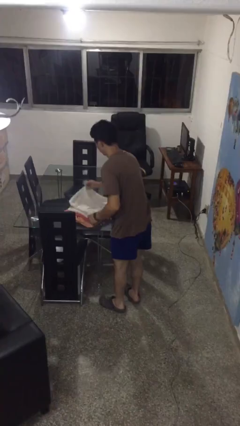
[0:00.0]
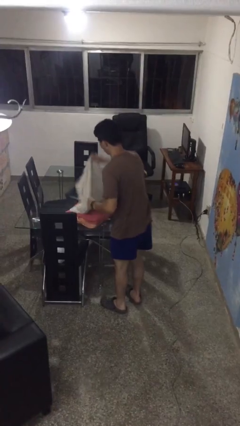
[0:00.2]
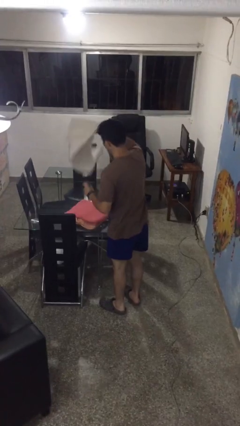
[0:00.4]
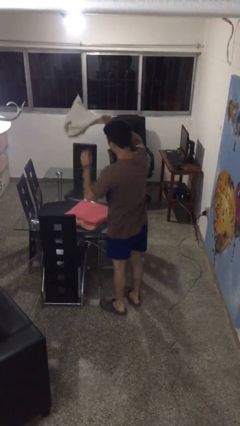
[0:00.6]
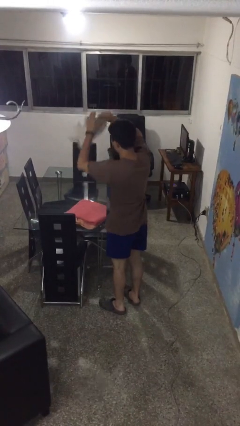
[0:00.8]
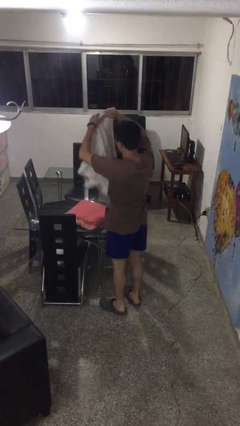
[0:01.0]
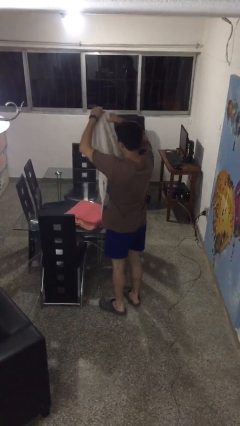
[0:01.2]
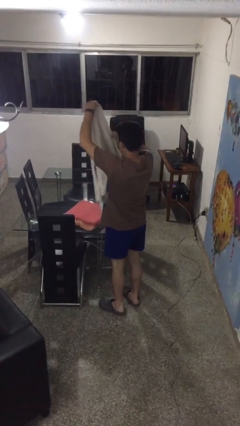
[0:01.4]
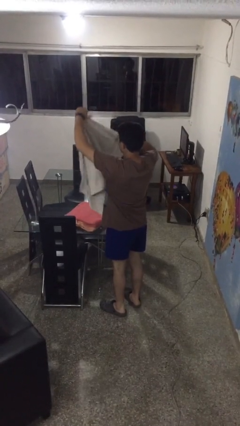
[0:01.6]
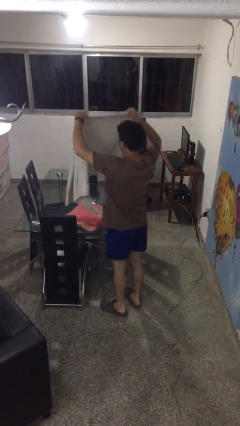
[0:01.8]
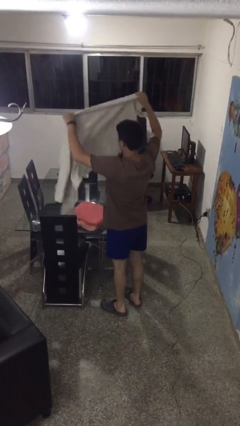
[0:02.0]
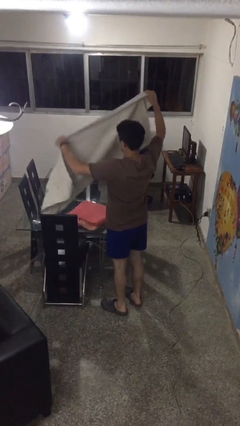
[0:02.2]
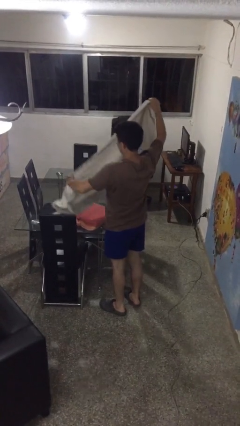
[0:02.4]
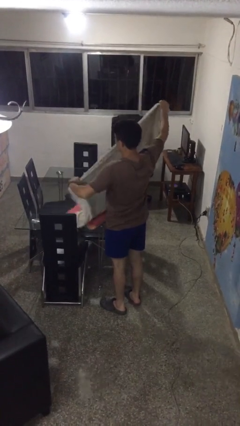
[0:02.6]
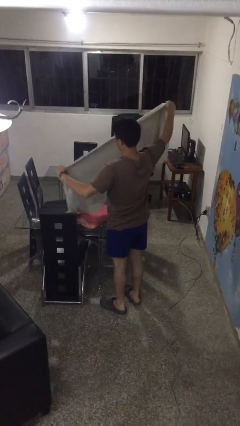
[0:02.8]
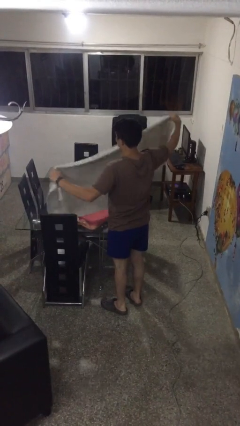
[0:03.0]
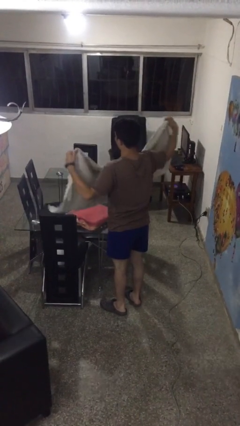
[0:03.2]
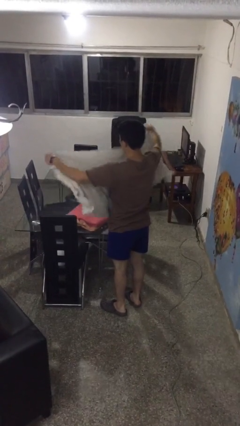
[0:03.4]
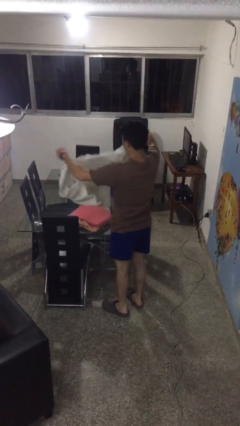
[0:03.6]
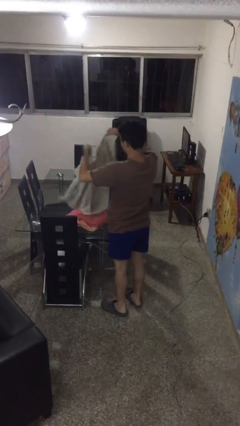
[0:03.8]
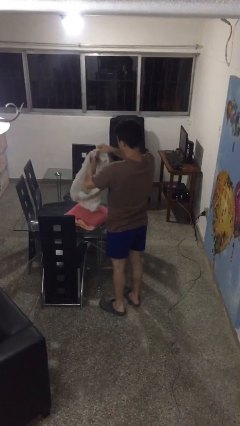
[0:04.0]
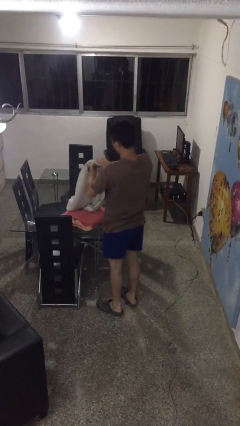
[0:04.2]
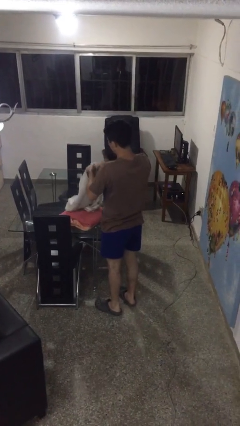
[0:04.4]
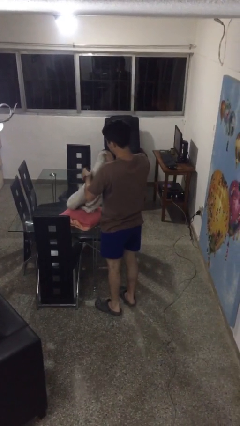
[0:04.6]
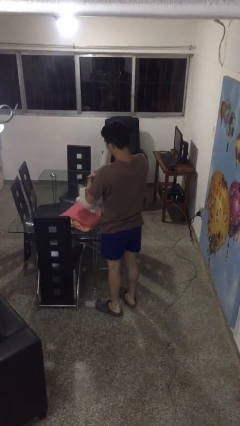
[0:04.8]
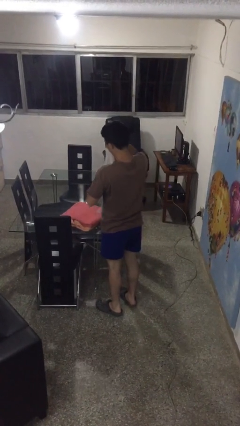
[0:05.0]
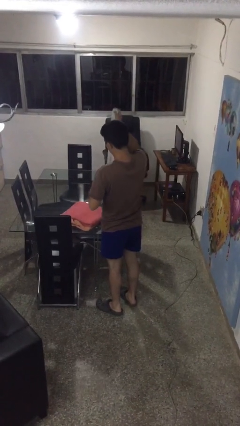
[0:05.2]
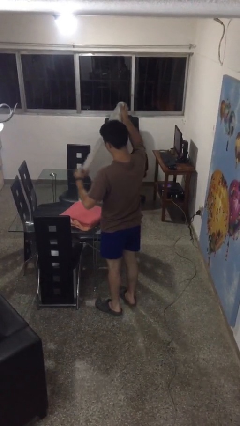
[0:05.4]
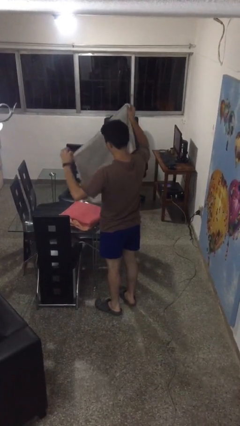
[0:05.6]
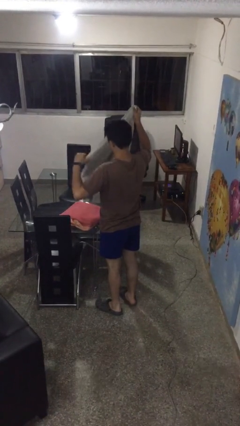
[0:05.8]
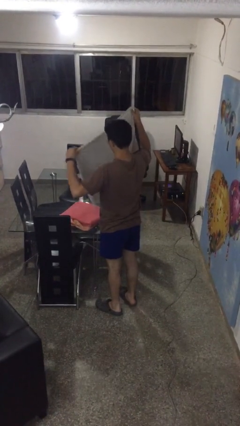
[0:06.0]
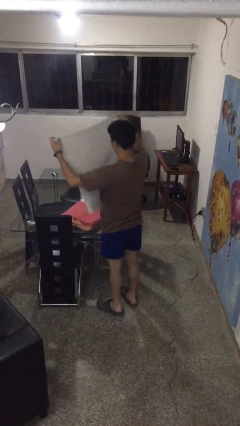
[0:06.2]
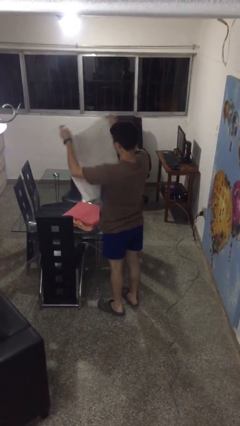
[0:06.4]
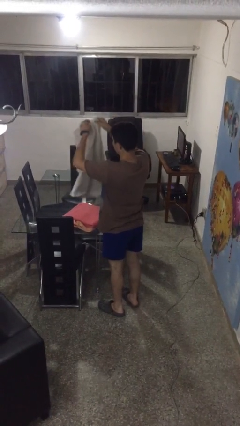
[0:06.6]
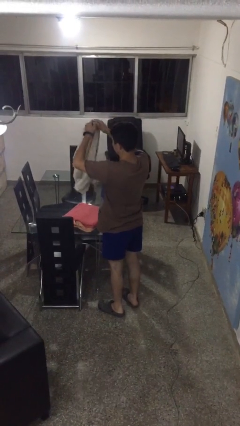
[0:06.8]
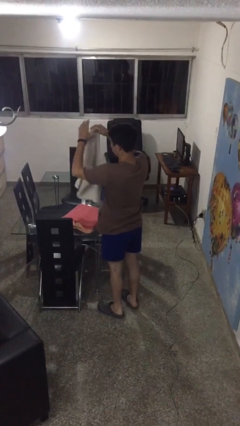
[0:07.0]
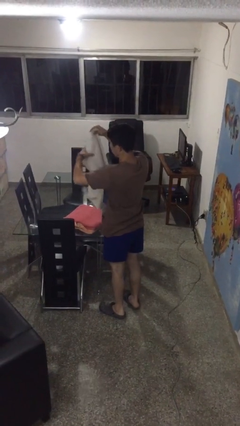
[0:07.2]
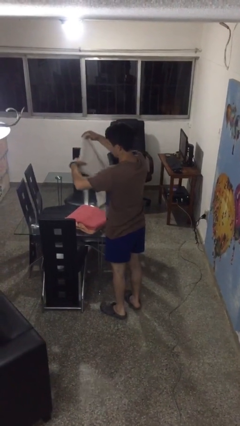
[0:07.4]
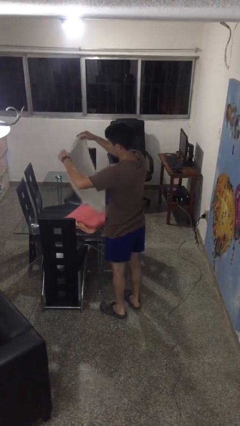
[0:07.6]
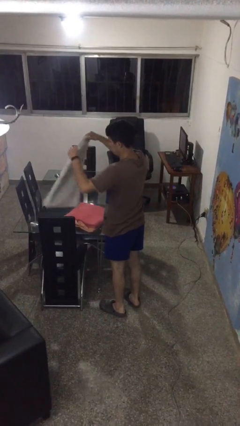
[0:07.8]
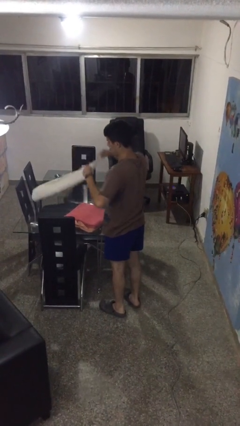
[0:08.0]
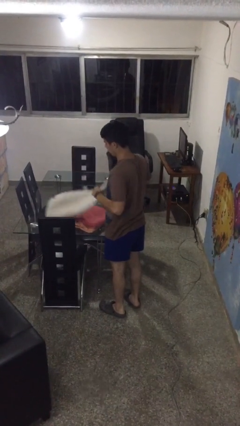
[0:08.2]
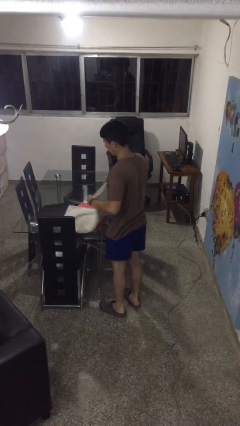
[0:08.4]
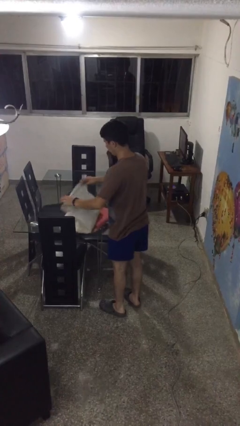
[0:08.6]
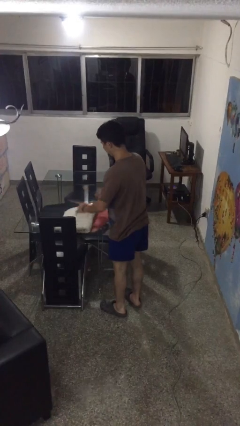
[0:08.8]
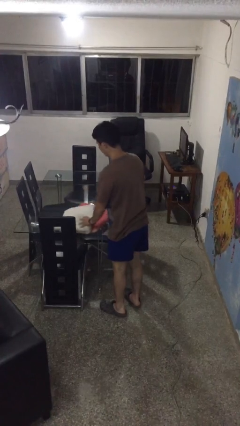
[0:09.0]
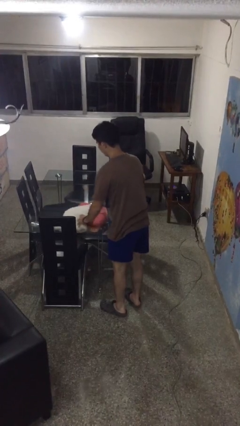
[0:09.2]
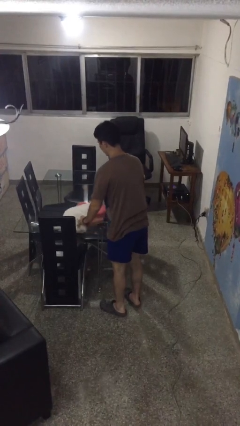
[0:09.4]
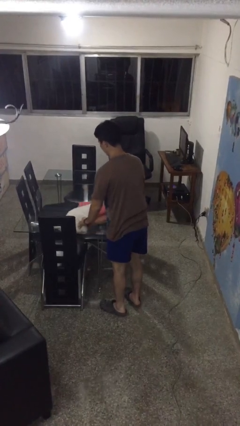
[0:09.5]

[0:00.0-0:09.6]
person folds towel

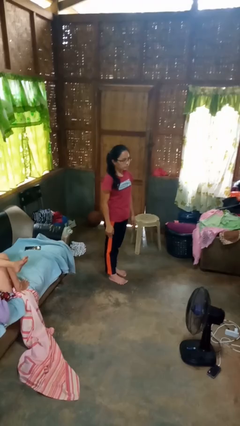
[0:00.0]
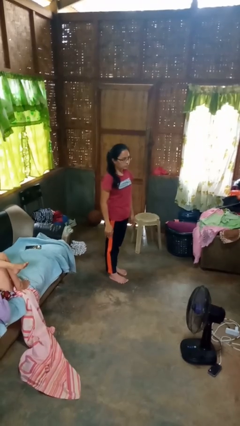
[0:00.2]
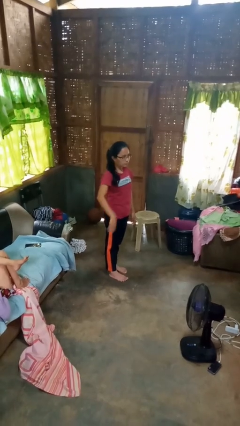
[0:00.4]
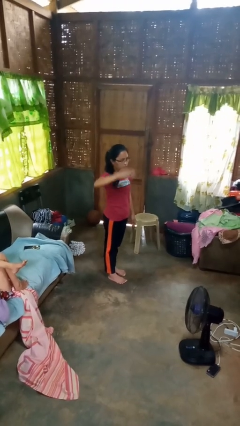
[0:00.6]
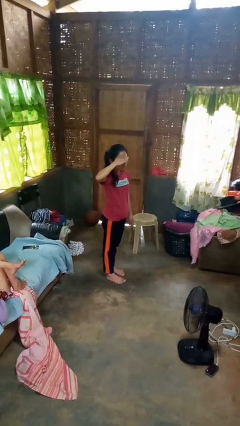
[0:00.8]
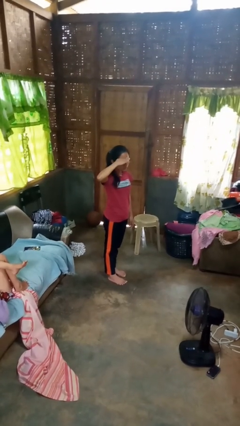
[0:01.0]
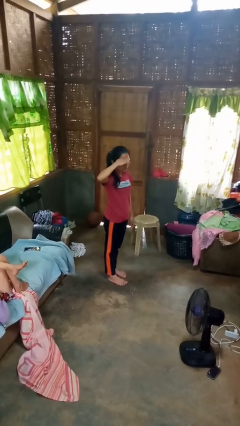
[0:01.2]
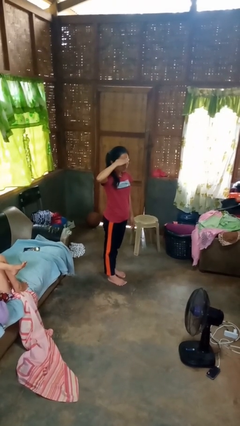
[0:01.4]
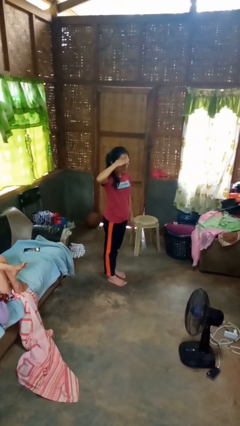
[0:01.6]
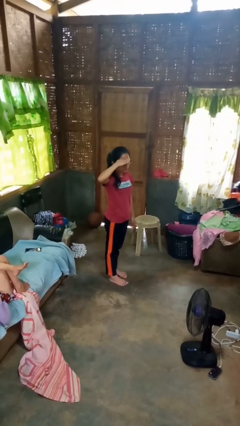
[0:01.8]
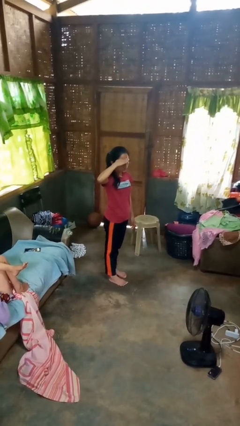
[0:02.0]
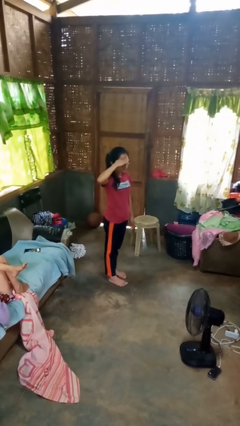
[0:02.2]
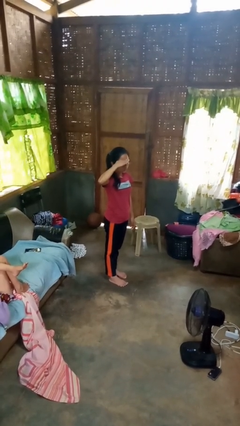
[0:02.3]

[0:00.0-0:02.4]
person salutes

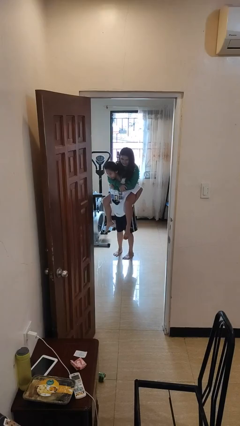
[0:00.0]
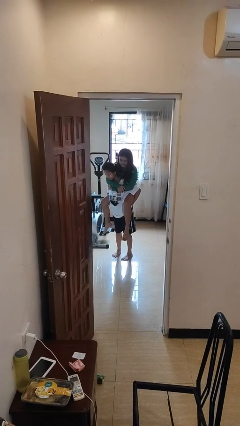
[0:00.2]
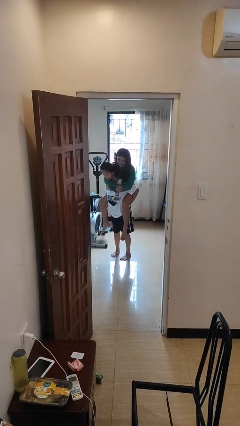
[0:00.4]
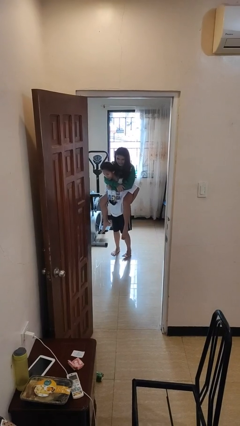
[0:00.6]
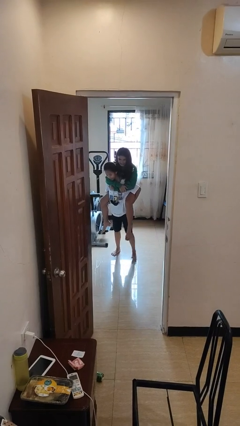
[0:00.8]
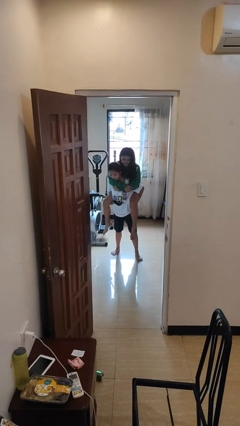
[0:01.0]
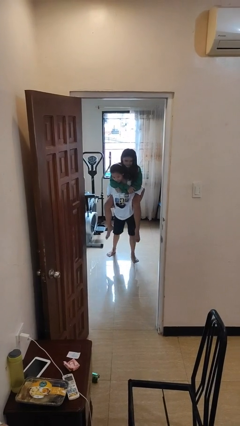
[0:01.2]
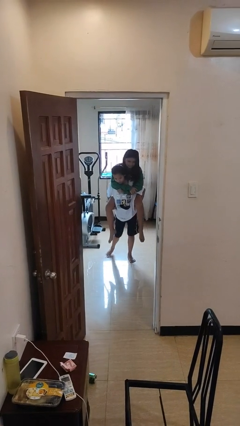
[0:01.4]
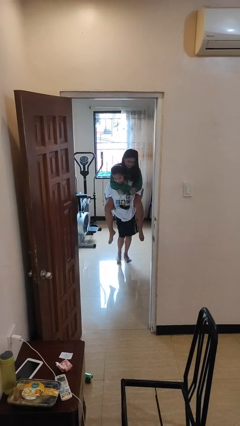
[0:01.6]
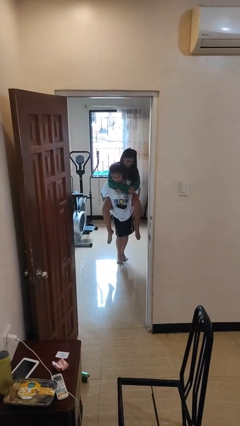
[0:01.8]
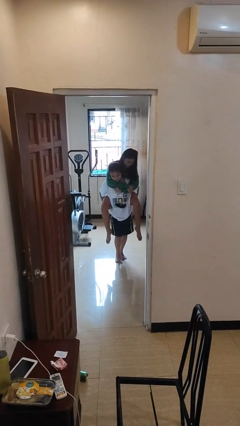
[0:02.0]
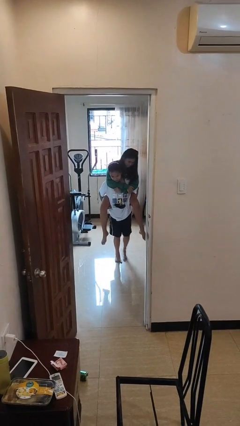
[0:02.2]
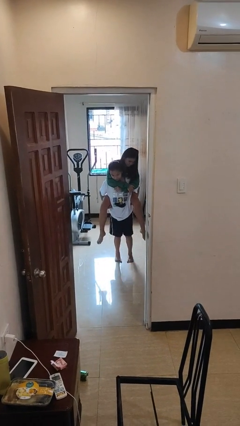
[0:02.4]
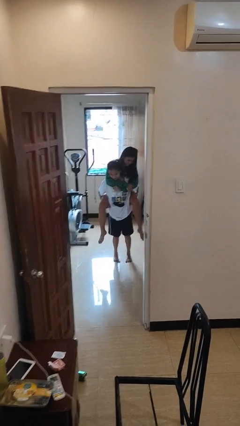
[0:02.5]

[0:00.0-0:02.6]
person carries person on back

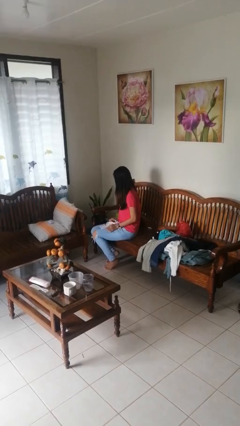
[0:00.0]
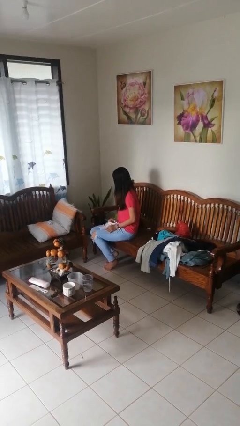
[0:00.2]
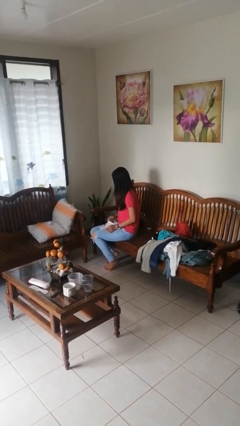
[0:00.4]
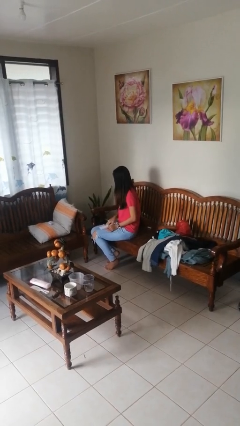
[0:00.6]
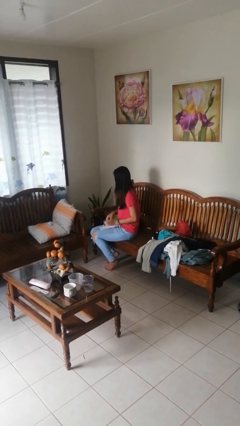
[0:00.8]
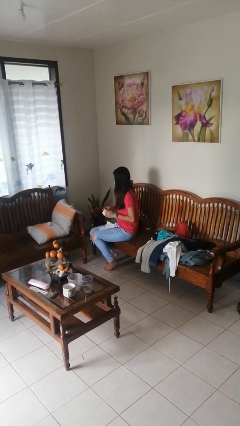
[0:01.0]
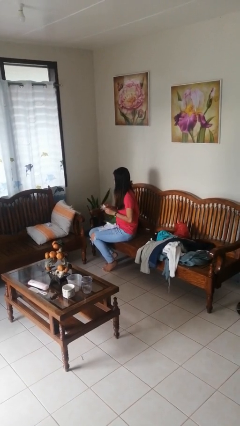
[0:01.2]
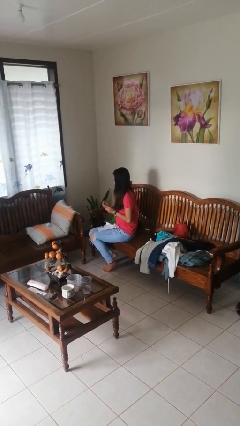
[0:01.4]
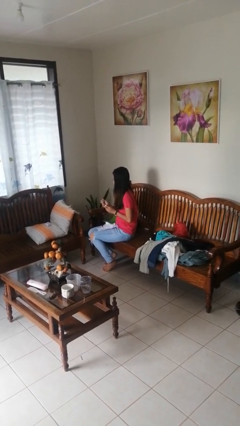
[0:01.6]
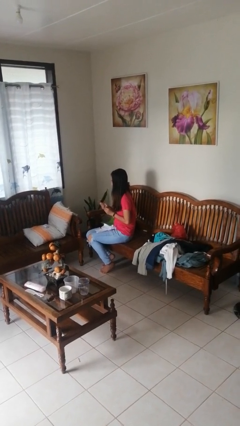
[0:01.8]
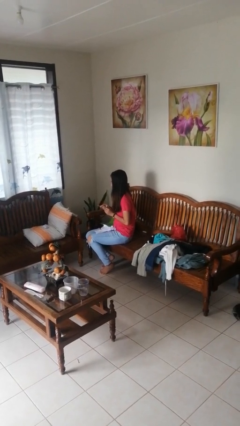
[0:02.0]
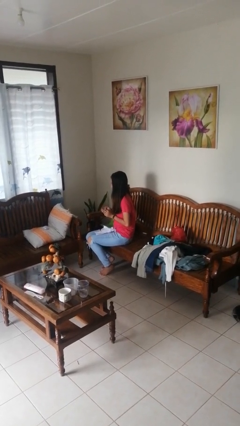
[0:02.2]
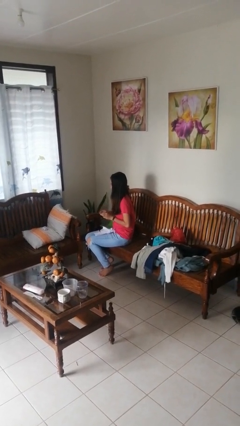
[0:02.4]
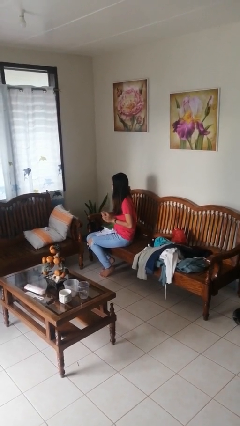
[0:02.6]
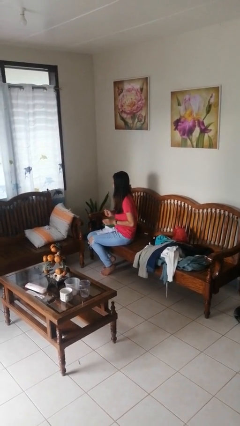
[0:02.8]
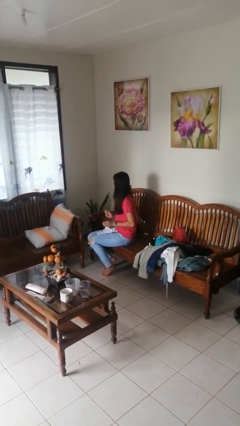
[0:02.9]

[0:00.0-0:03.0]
person crumples paper

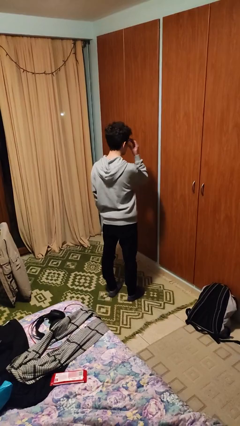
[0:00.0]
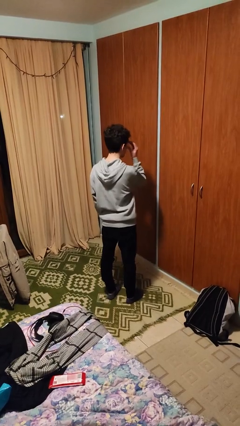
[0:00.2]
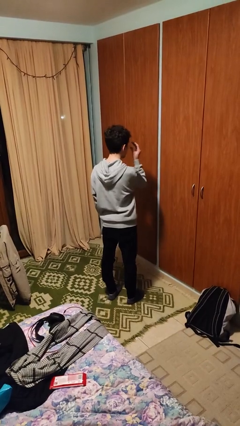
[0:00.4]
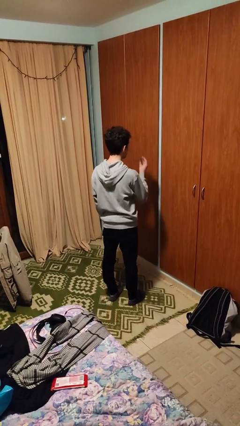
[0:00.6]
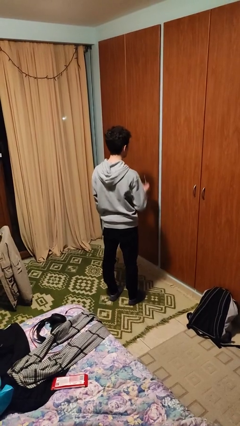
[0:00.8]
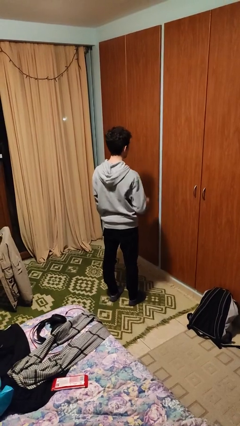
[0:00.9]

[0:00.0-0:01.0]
person takes off glasses
